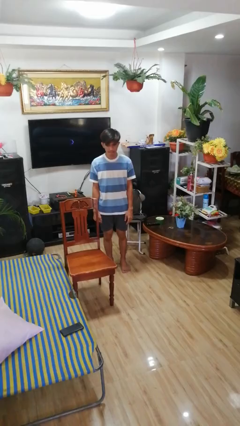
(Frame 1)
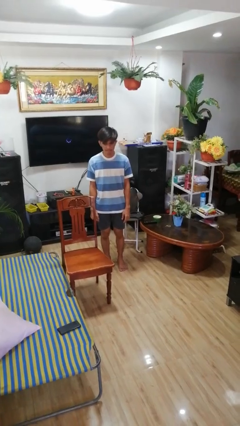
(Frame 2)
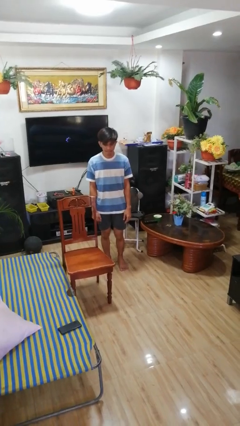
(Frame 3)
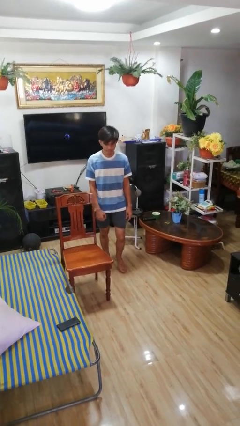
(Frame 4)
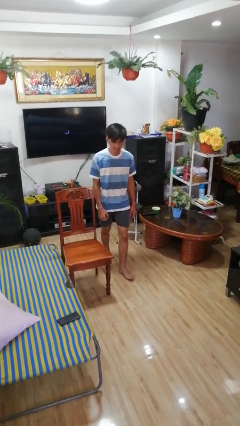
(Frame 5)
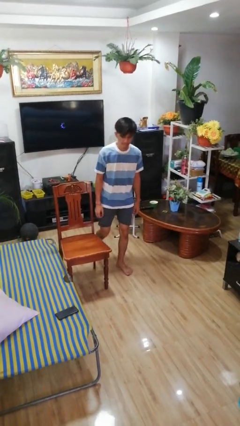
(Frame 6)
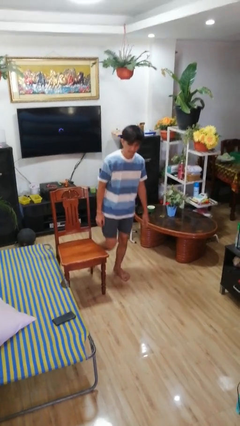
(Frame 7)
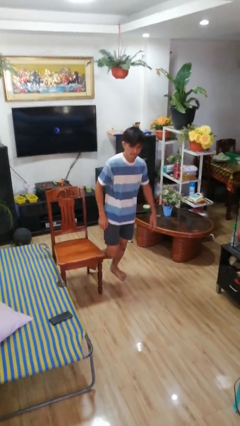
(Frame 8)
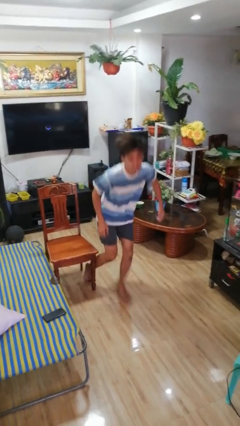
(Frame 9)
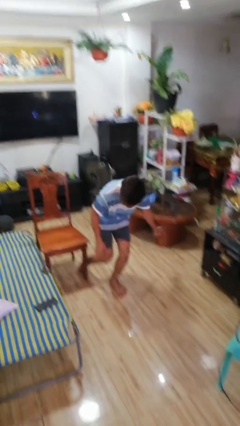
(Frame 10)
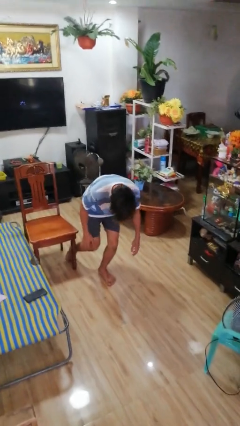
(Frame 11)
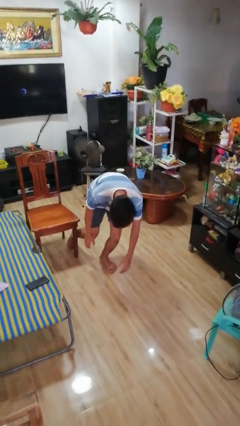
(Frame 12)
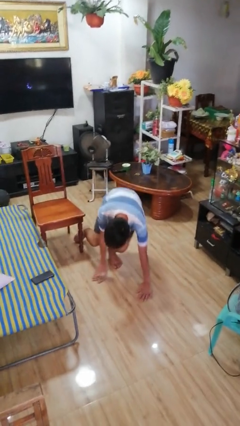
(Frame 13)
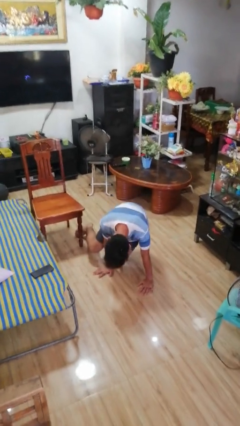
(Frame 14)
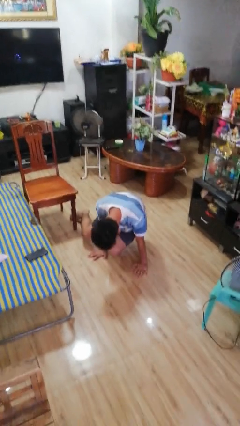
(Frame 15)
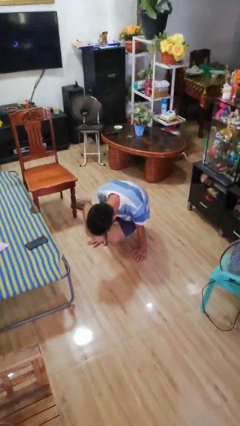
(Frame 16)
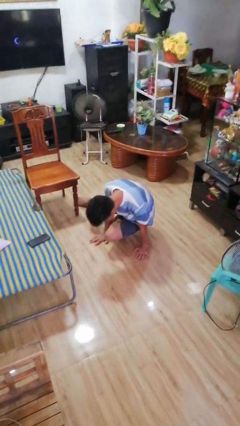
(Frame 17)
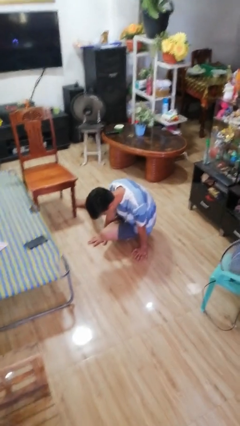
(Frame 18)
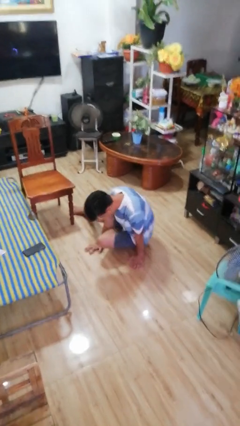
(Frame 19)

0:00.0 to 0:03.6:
person trips on object on floor

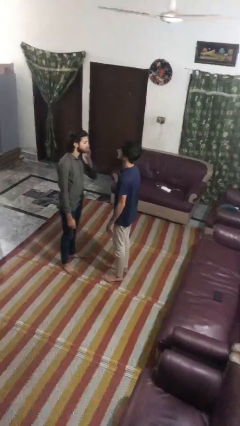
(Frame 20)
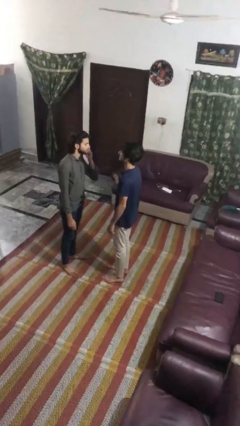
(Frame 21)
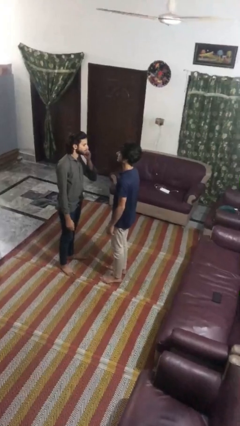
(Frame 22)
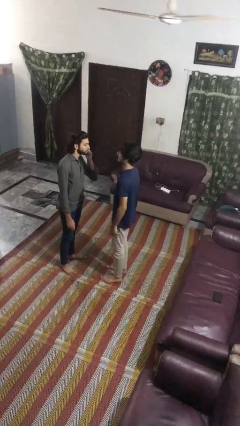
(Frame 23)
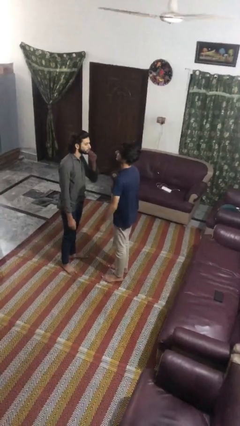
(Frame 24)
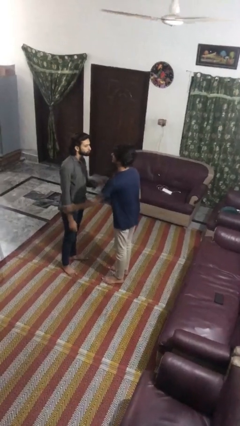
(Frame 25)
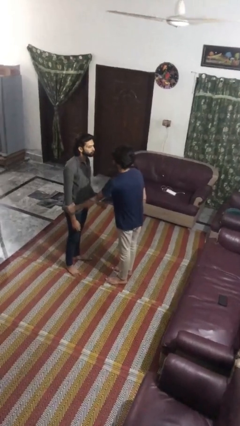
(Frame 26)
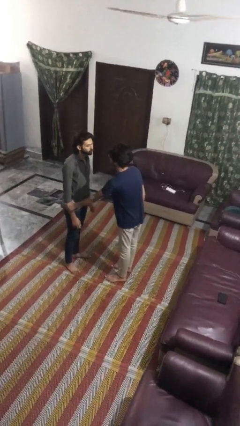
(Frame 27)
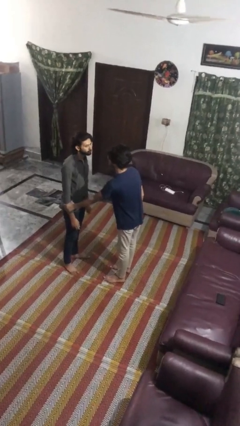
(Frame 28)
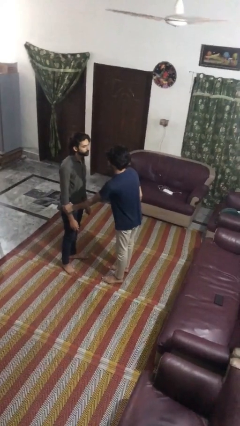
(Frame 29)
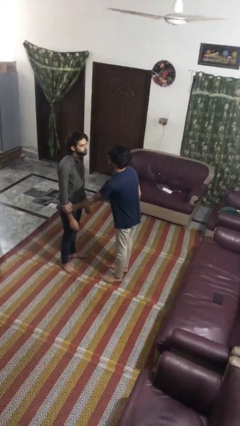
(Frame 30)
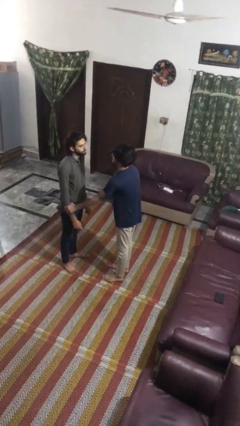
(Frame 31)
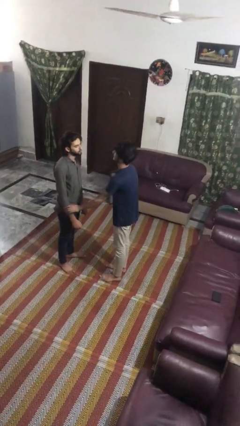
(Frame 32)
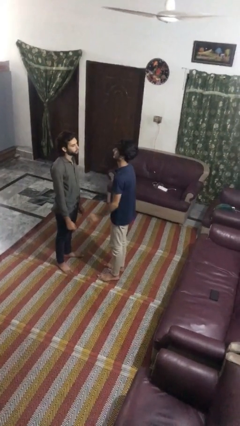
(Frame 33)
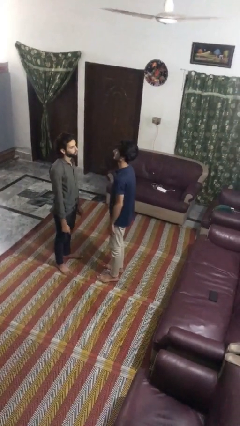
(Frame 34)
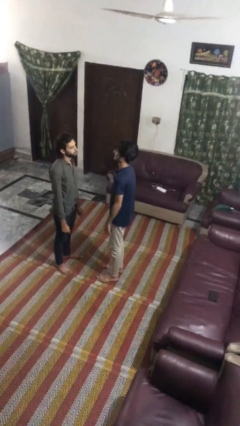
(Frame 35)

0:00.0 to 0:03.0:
person grabs person by forearm

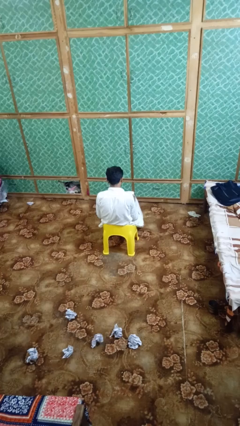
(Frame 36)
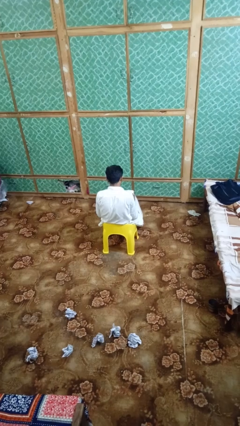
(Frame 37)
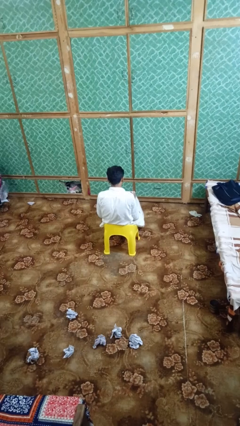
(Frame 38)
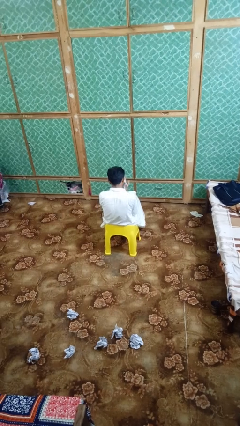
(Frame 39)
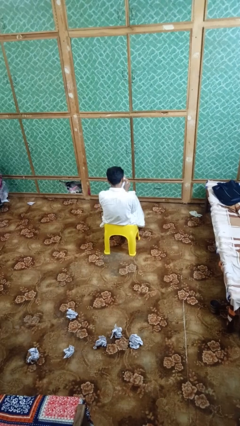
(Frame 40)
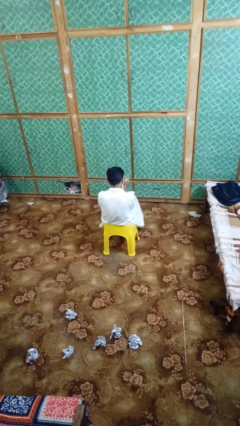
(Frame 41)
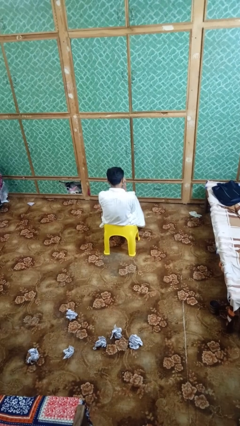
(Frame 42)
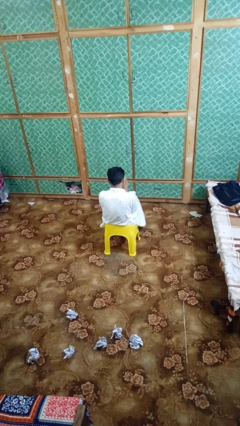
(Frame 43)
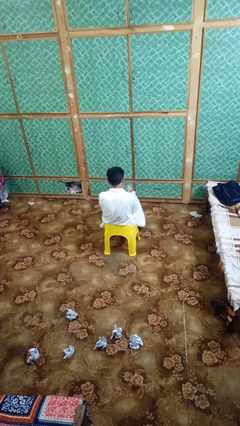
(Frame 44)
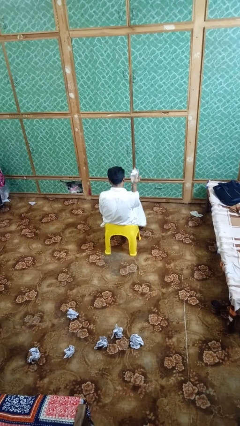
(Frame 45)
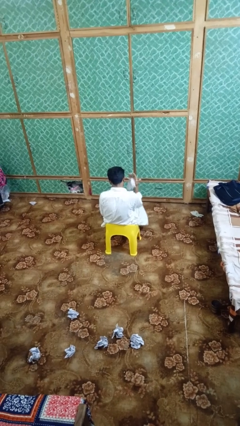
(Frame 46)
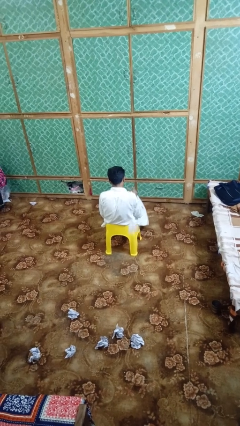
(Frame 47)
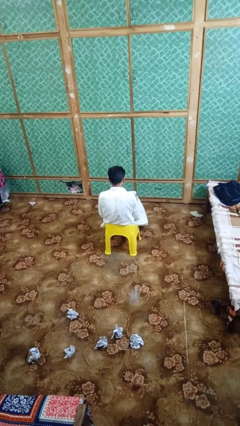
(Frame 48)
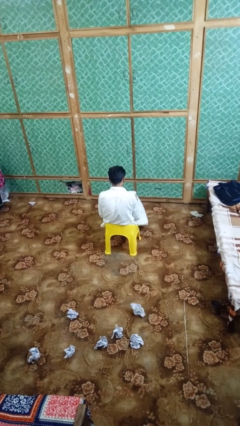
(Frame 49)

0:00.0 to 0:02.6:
person crumples paper

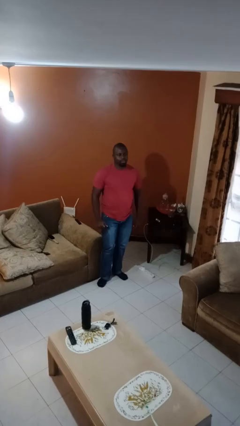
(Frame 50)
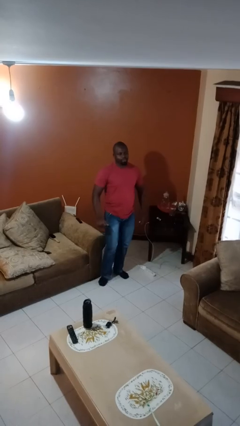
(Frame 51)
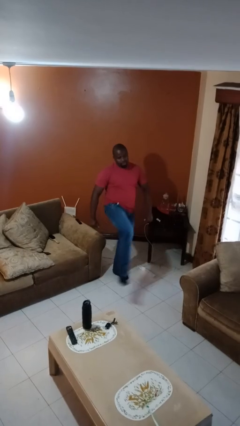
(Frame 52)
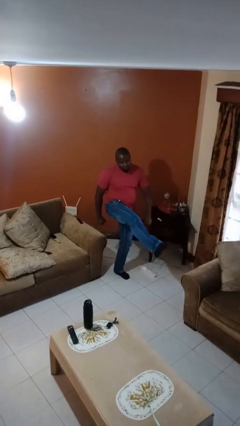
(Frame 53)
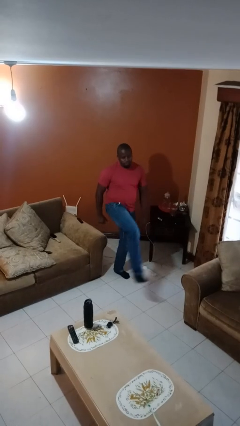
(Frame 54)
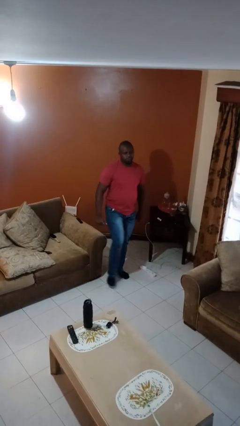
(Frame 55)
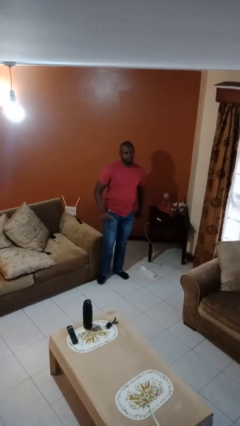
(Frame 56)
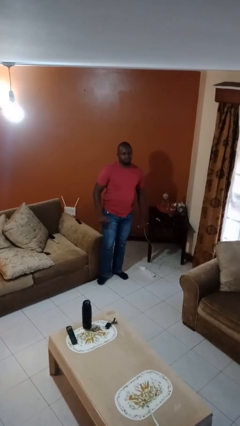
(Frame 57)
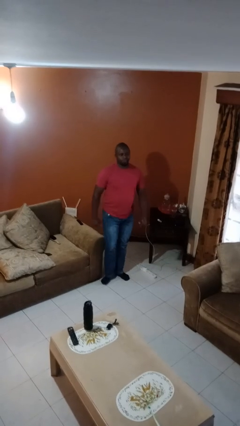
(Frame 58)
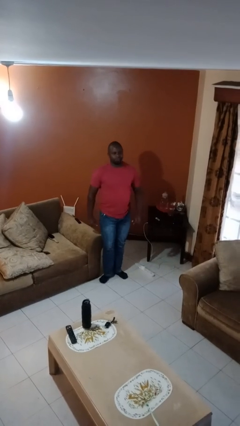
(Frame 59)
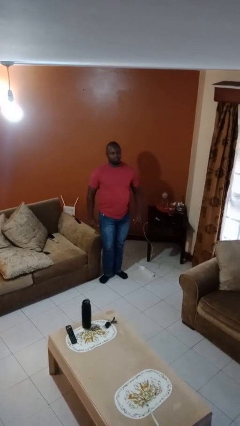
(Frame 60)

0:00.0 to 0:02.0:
person karate kicks

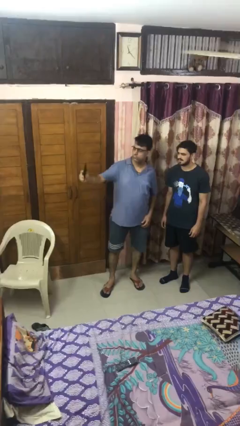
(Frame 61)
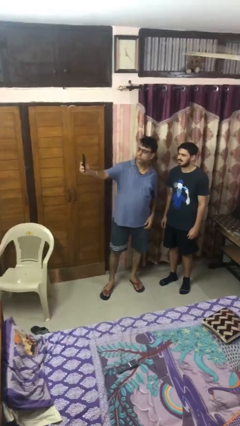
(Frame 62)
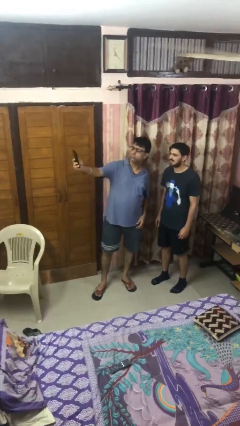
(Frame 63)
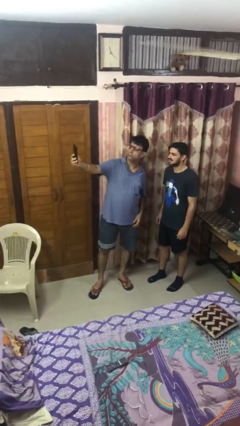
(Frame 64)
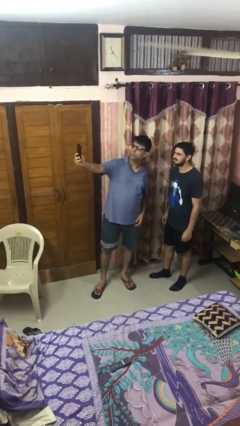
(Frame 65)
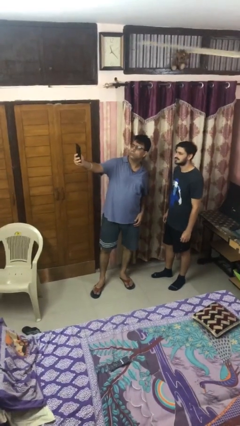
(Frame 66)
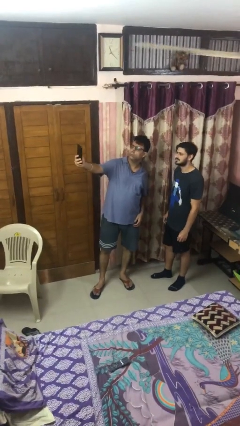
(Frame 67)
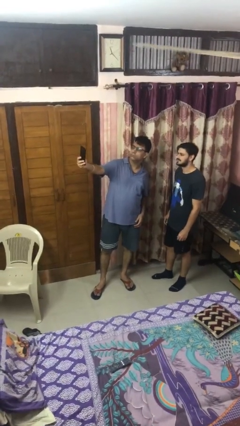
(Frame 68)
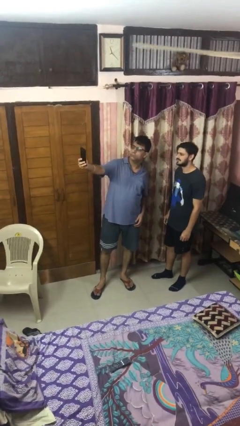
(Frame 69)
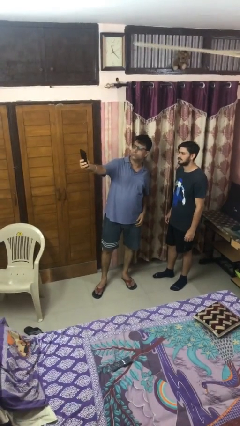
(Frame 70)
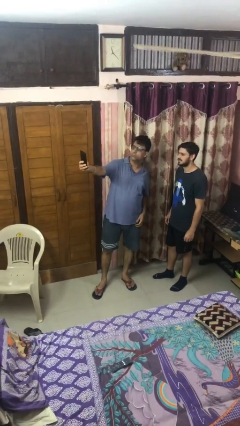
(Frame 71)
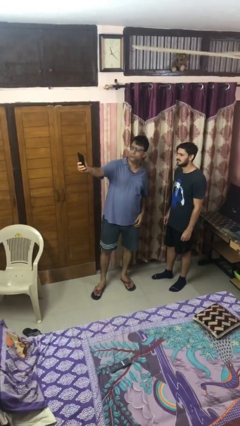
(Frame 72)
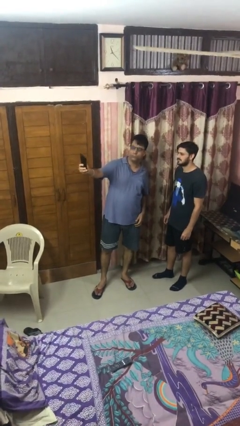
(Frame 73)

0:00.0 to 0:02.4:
person takes selfie with person

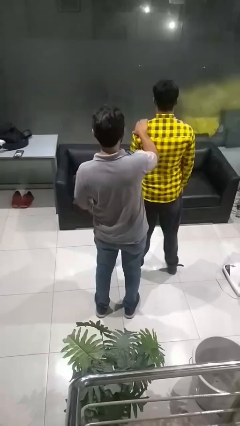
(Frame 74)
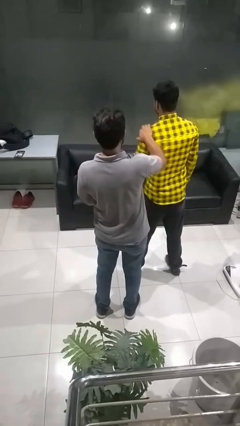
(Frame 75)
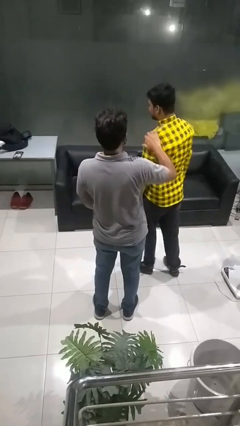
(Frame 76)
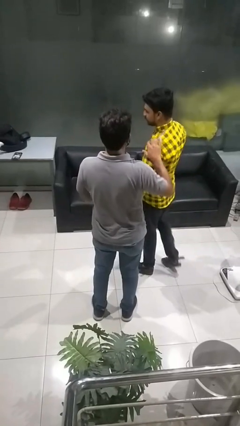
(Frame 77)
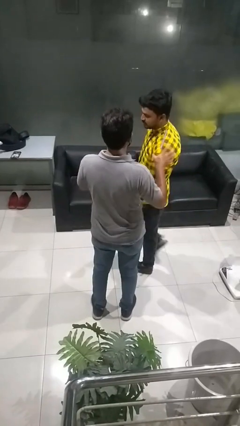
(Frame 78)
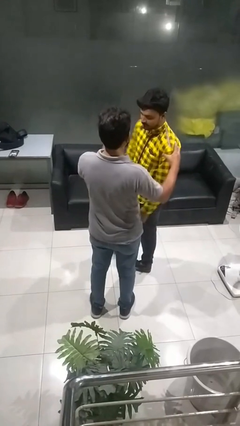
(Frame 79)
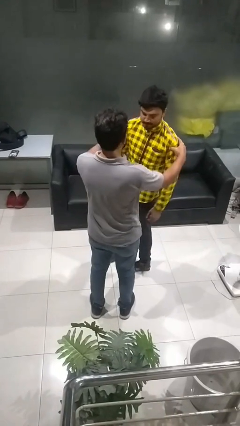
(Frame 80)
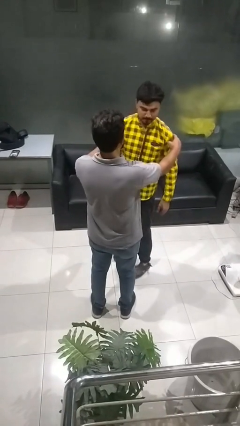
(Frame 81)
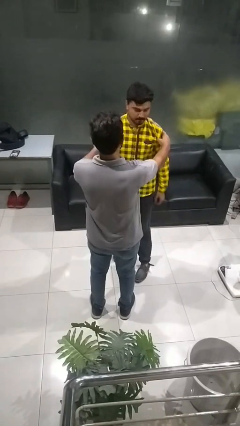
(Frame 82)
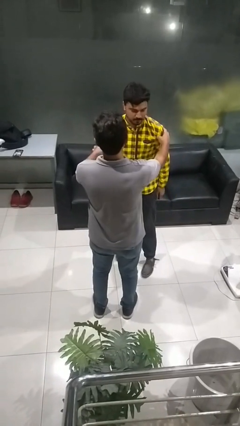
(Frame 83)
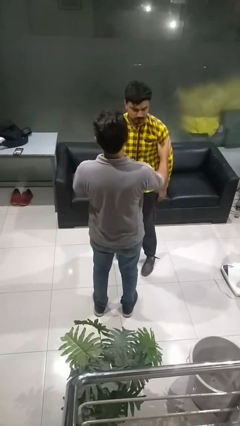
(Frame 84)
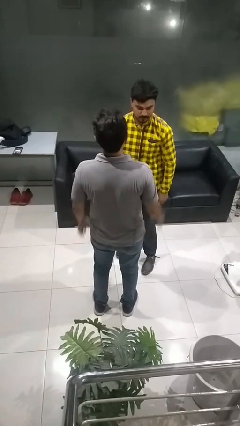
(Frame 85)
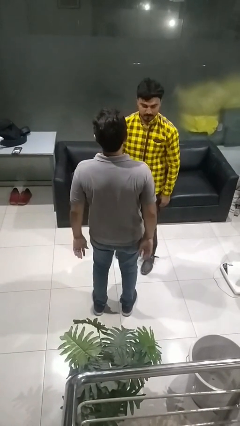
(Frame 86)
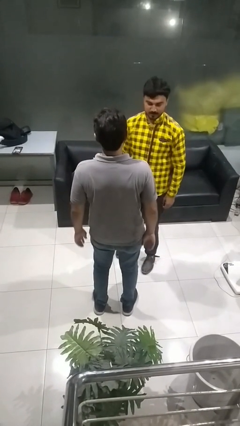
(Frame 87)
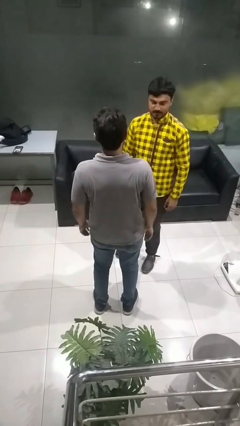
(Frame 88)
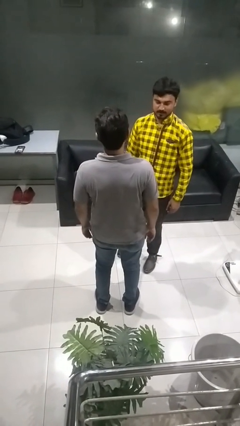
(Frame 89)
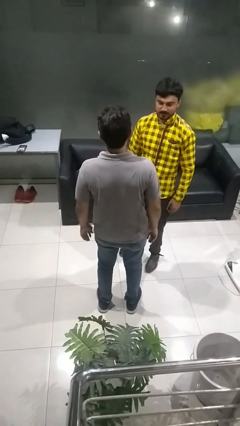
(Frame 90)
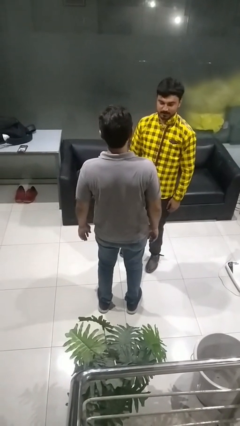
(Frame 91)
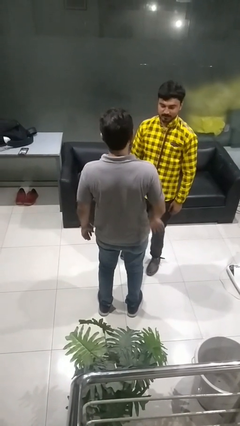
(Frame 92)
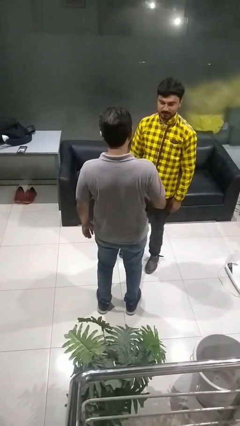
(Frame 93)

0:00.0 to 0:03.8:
person spins person around
